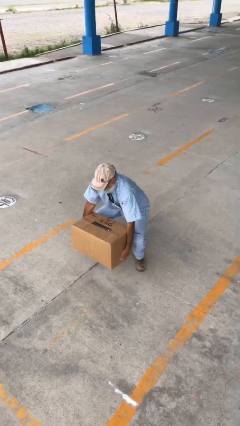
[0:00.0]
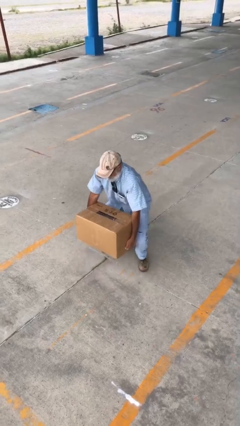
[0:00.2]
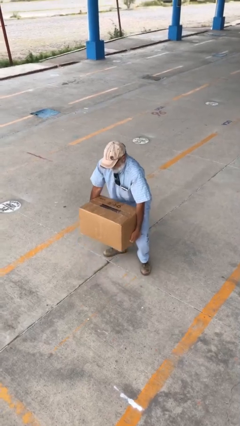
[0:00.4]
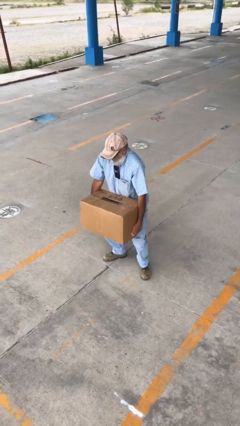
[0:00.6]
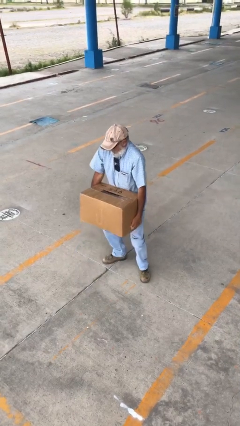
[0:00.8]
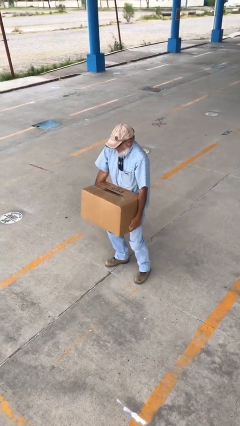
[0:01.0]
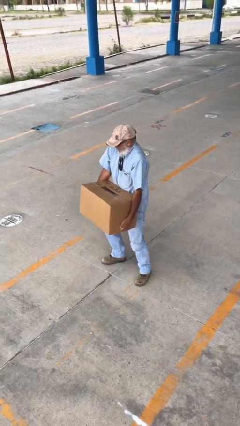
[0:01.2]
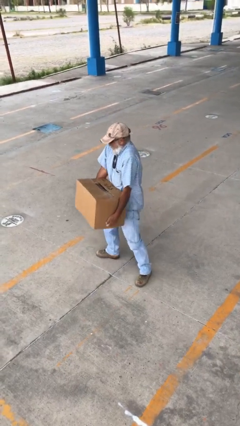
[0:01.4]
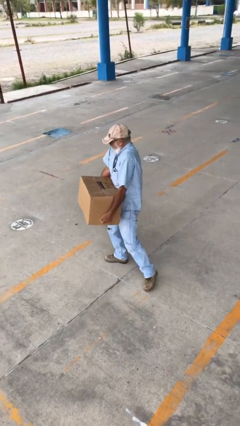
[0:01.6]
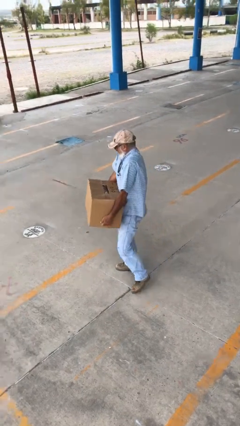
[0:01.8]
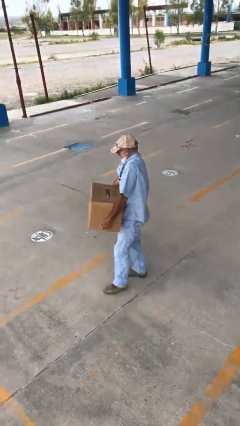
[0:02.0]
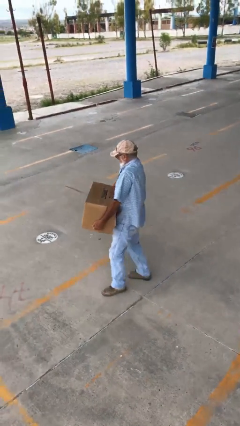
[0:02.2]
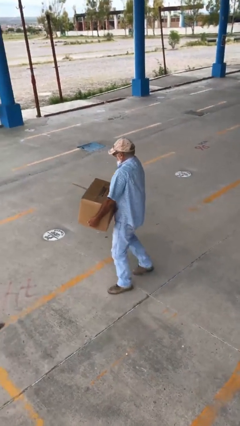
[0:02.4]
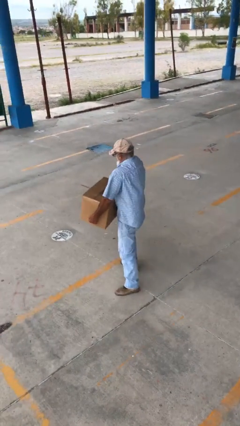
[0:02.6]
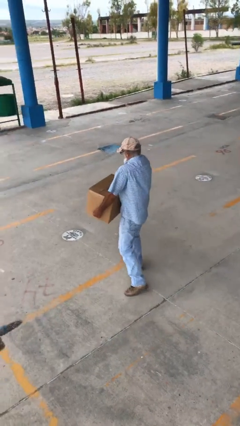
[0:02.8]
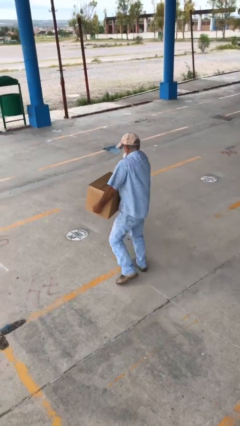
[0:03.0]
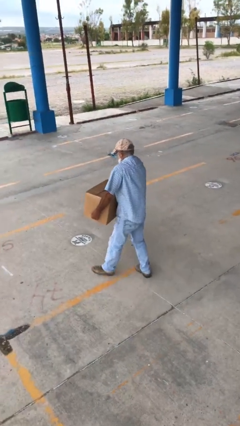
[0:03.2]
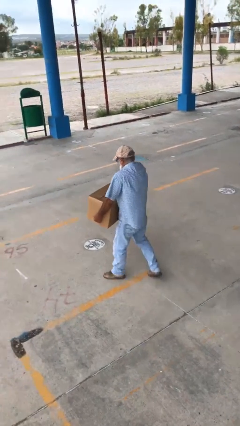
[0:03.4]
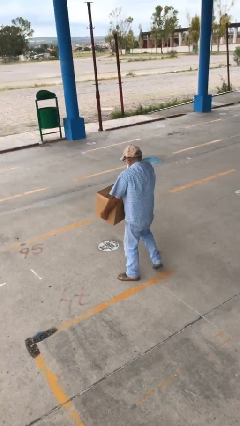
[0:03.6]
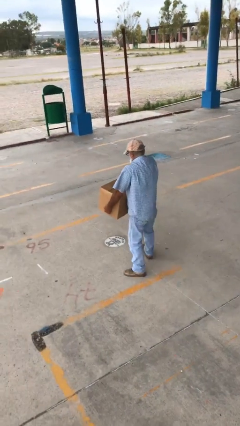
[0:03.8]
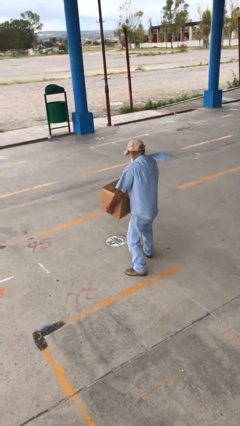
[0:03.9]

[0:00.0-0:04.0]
person carries heavy object

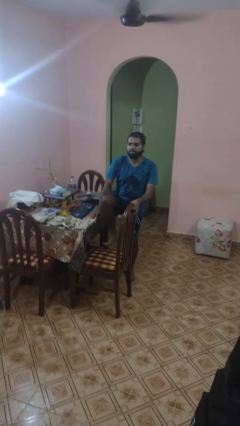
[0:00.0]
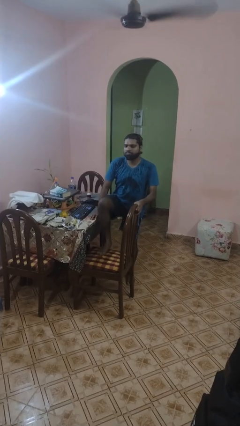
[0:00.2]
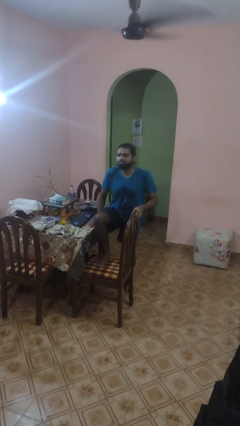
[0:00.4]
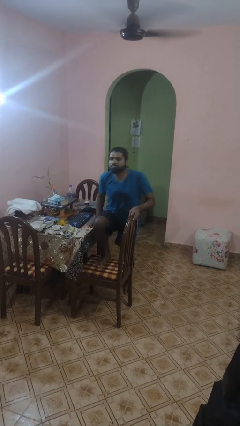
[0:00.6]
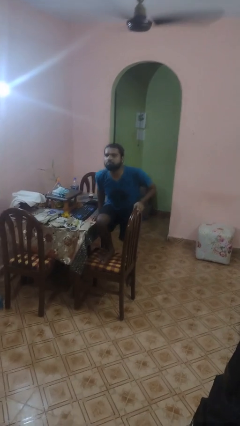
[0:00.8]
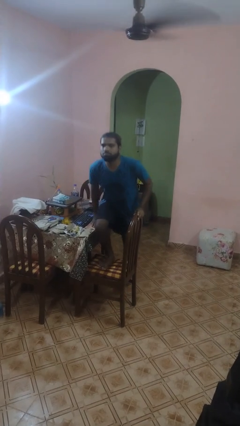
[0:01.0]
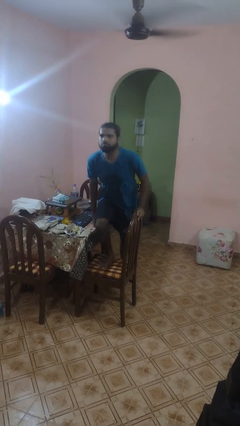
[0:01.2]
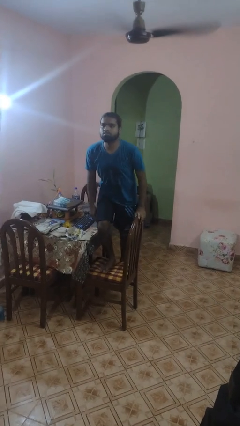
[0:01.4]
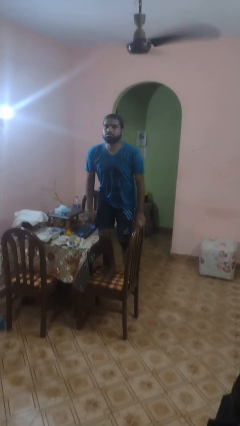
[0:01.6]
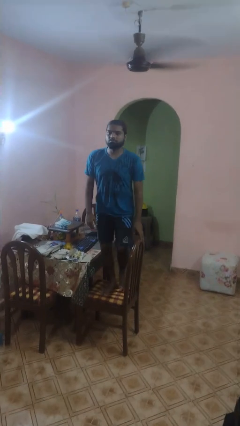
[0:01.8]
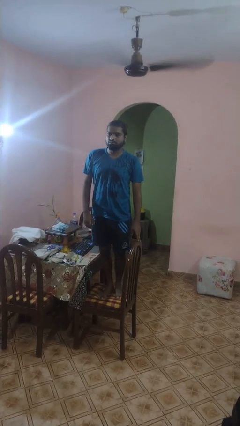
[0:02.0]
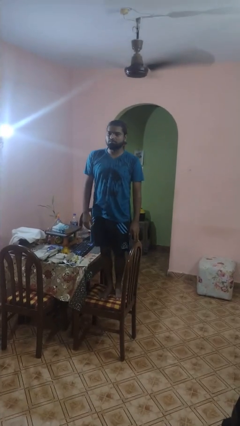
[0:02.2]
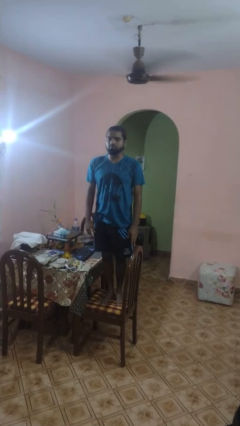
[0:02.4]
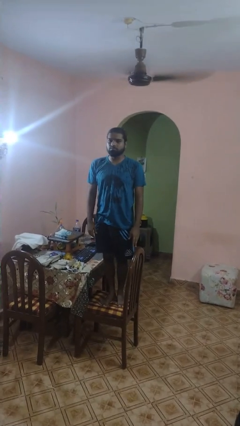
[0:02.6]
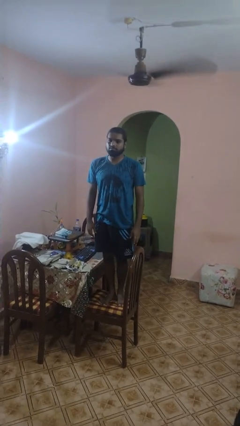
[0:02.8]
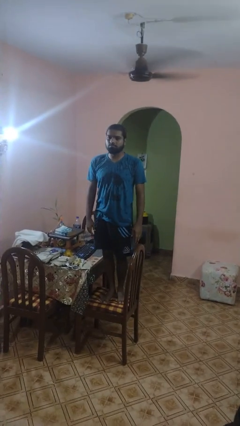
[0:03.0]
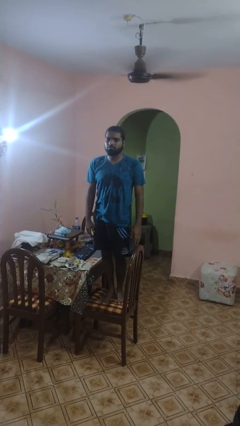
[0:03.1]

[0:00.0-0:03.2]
person climbs on chair

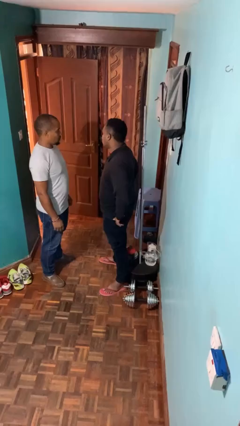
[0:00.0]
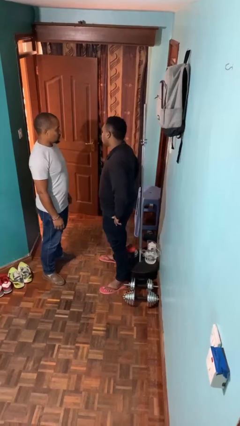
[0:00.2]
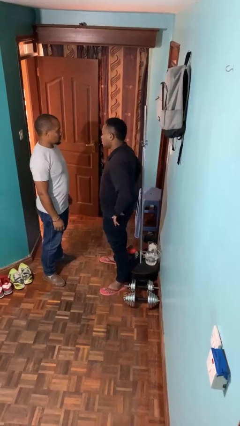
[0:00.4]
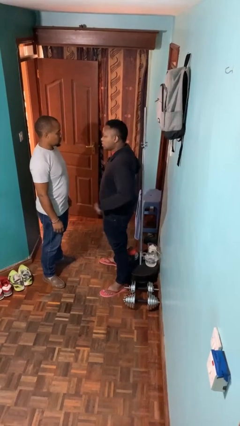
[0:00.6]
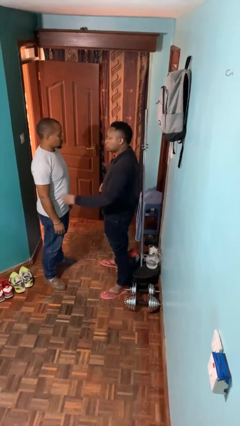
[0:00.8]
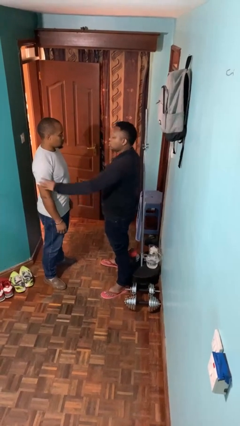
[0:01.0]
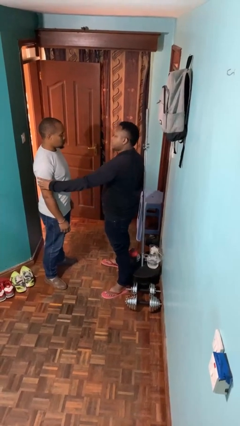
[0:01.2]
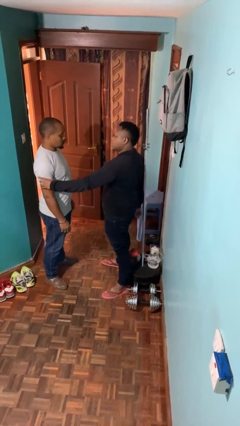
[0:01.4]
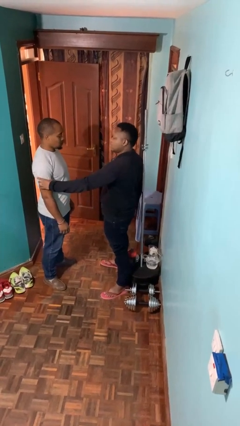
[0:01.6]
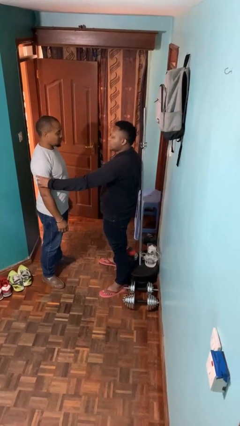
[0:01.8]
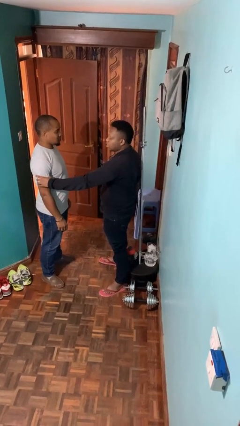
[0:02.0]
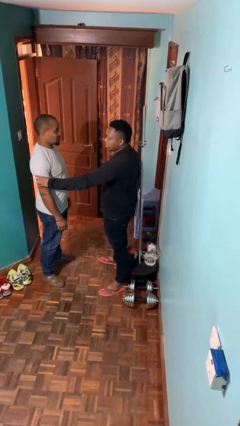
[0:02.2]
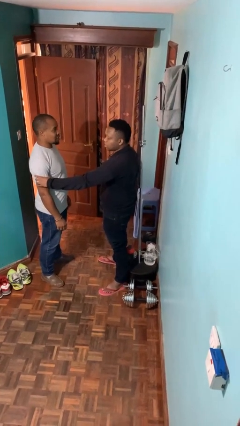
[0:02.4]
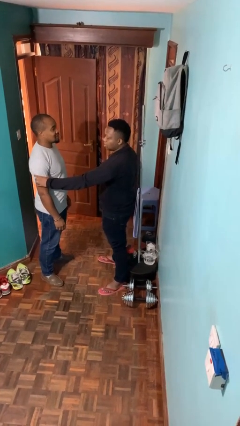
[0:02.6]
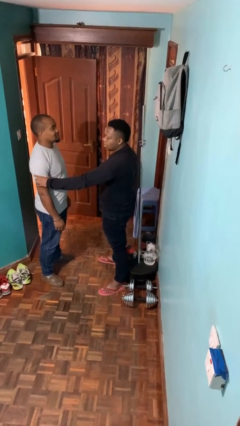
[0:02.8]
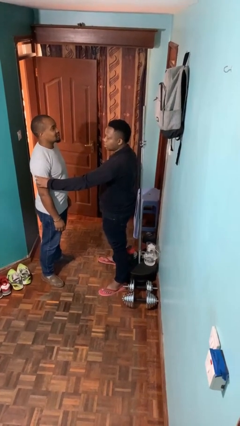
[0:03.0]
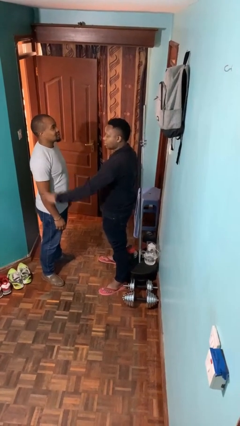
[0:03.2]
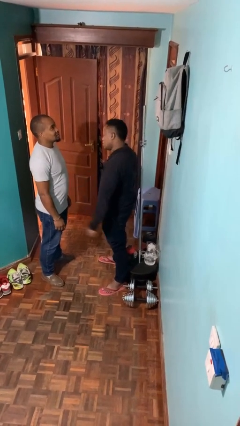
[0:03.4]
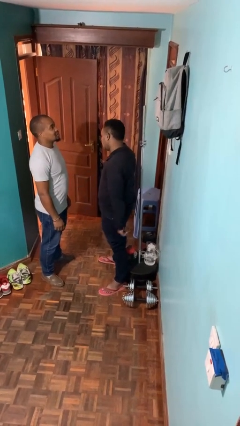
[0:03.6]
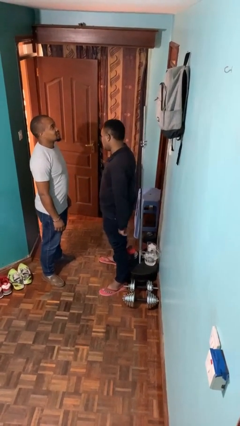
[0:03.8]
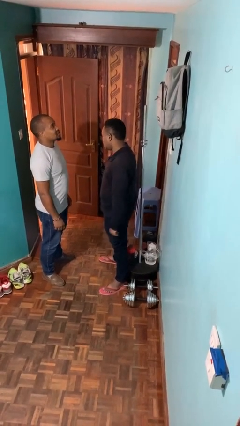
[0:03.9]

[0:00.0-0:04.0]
person grabs person by bicep

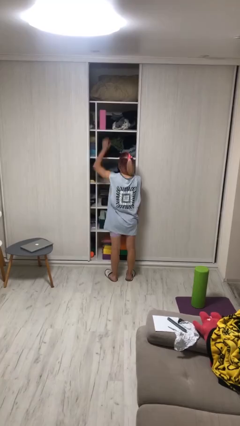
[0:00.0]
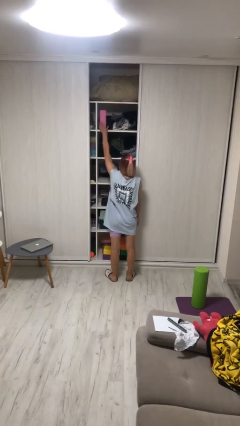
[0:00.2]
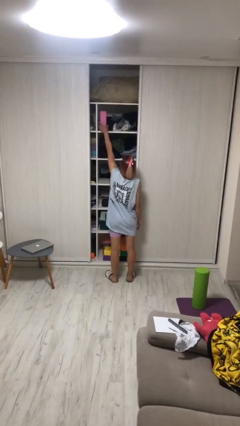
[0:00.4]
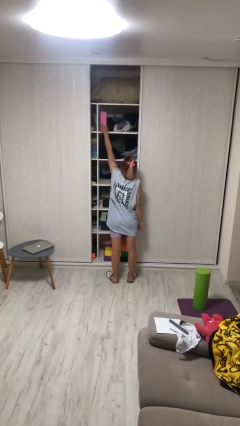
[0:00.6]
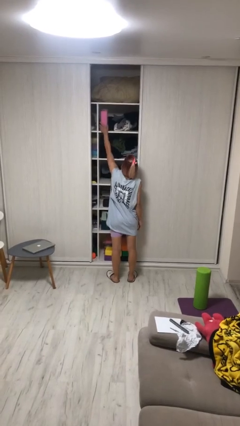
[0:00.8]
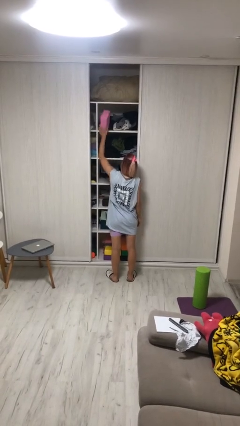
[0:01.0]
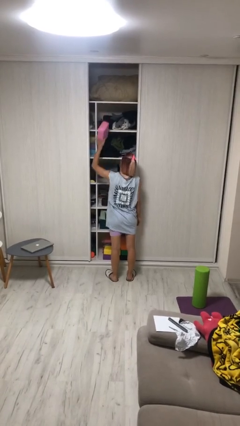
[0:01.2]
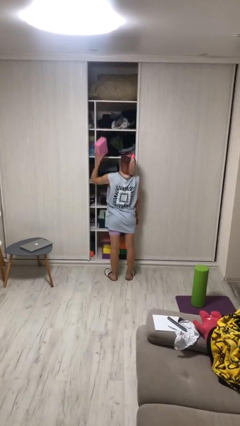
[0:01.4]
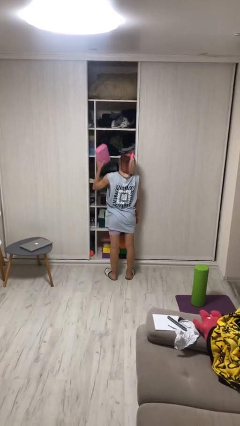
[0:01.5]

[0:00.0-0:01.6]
person picks up object from shelf

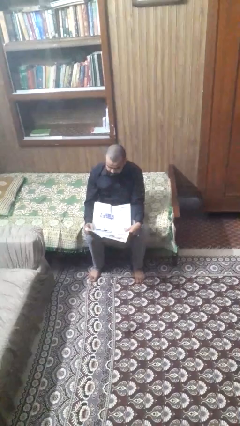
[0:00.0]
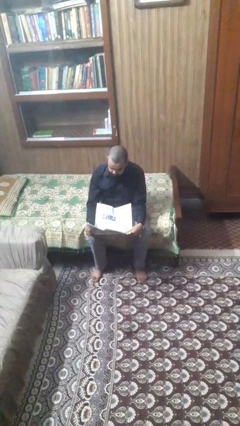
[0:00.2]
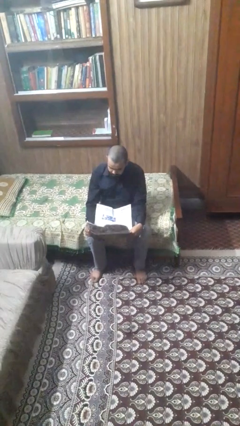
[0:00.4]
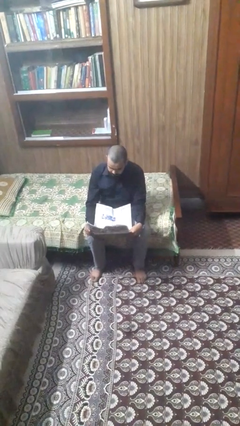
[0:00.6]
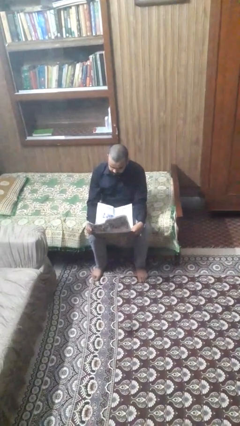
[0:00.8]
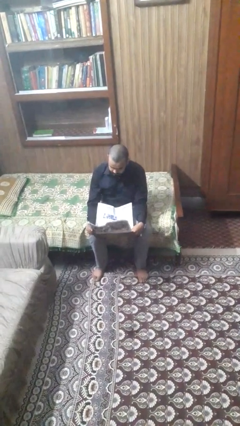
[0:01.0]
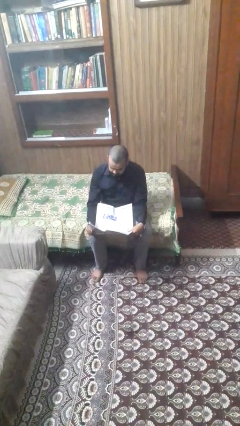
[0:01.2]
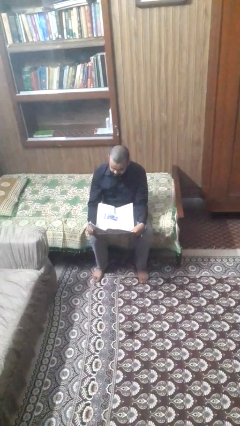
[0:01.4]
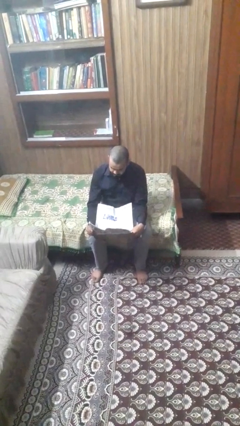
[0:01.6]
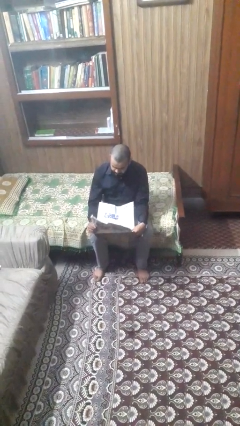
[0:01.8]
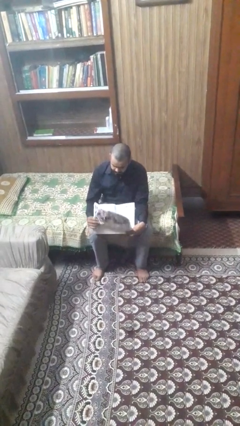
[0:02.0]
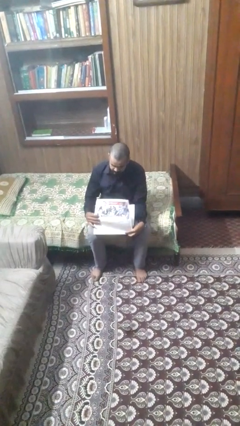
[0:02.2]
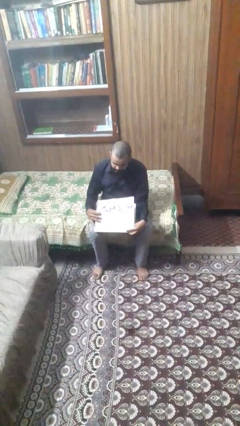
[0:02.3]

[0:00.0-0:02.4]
person reads newspaper

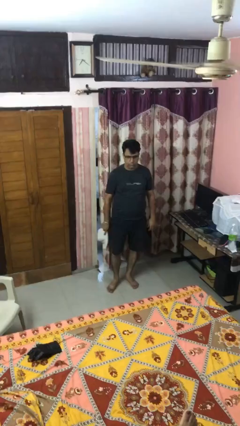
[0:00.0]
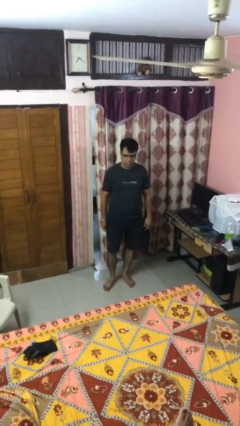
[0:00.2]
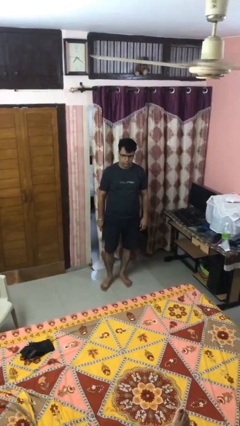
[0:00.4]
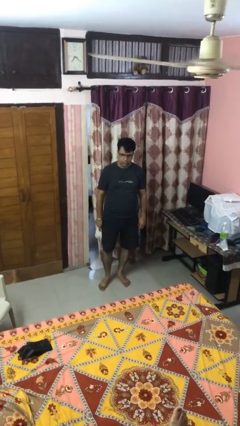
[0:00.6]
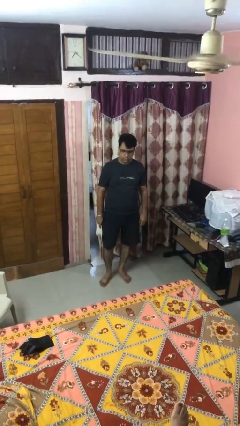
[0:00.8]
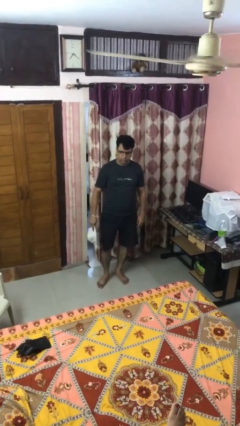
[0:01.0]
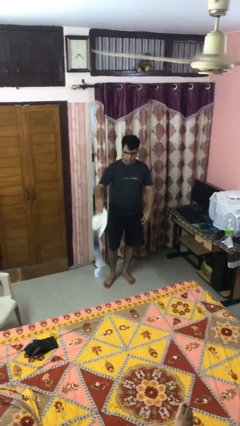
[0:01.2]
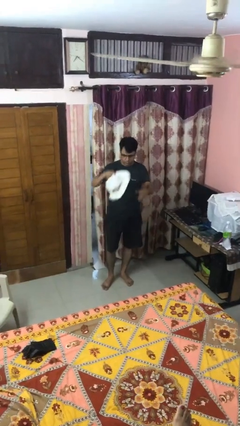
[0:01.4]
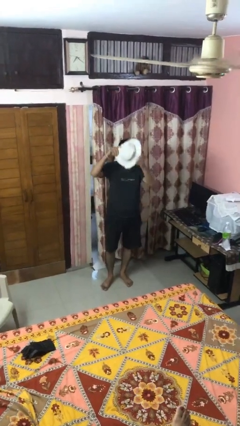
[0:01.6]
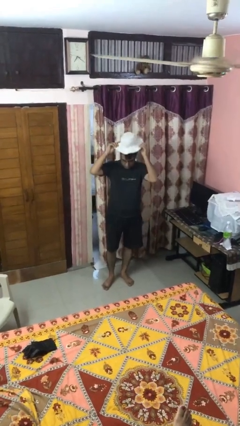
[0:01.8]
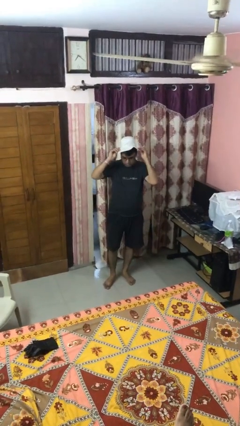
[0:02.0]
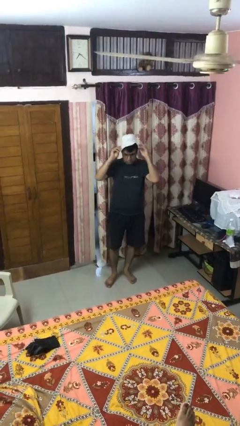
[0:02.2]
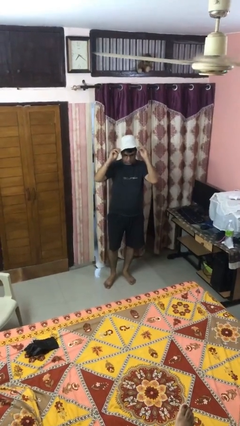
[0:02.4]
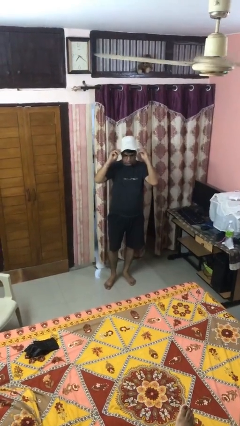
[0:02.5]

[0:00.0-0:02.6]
person puts on hat
